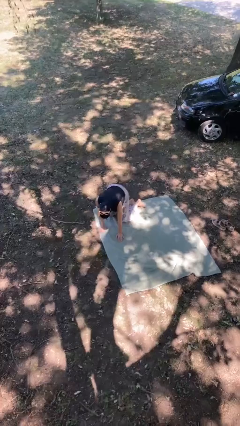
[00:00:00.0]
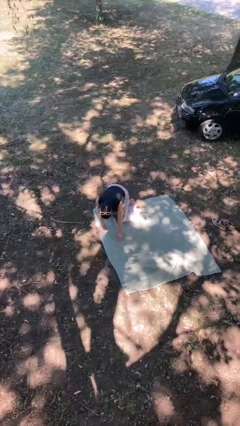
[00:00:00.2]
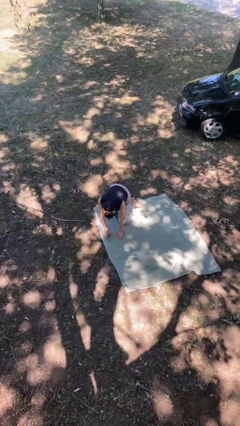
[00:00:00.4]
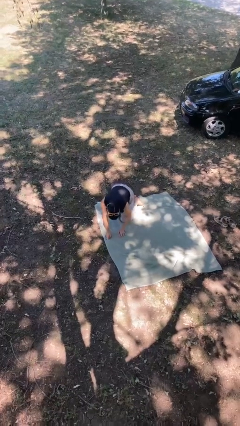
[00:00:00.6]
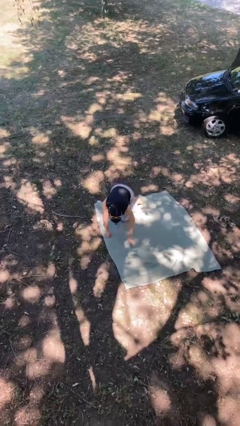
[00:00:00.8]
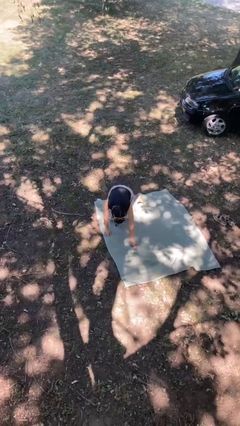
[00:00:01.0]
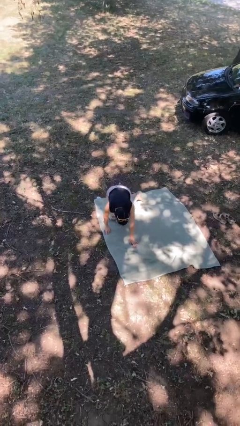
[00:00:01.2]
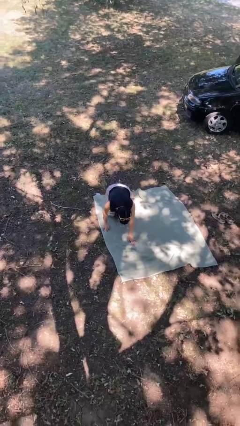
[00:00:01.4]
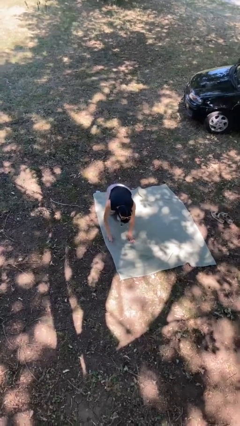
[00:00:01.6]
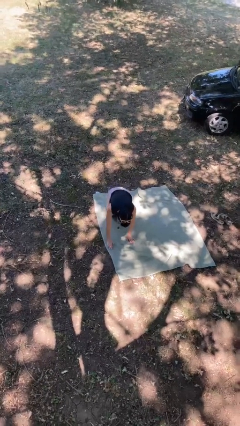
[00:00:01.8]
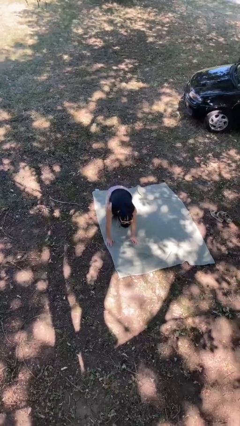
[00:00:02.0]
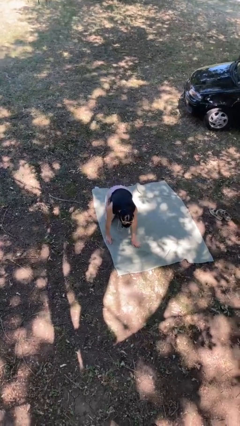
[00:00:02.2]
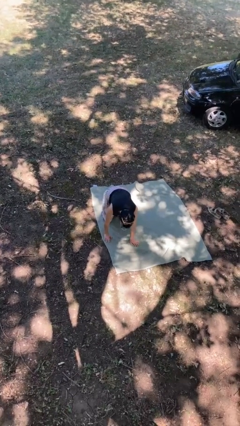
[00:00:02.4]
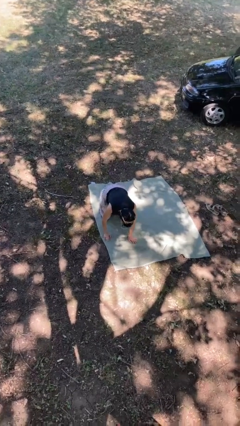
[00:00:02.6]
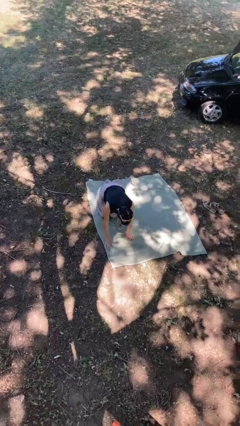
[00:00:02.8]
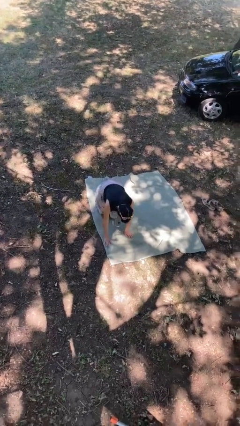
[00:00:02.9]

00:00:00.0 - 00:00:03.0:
person crawls

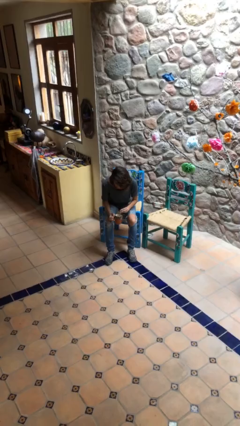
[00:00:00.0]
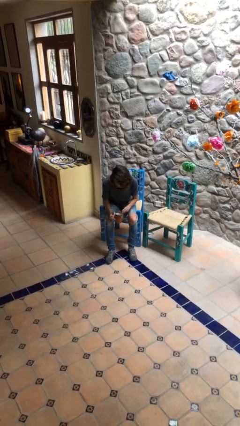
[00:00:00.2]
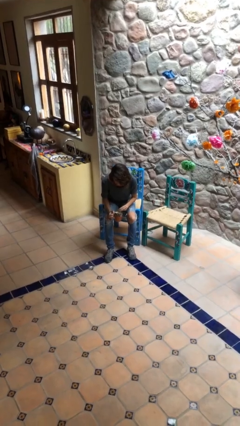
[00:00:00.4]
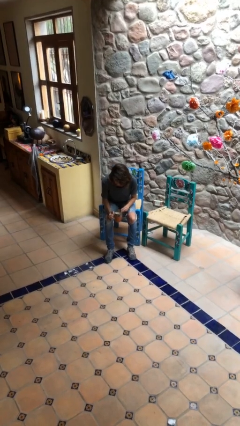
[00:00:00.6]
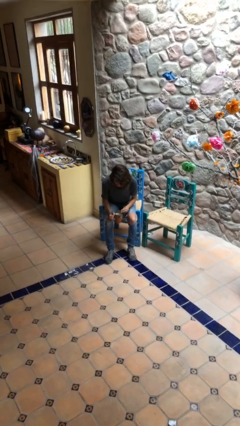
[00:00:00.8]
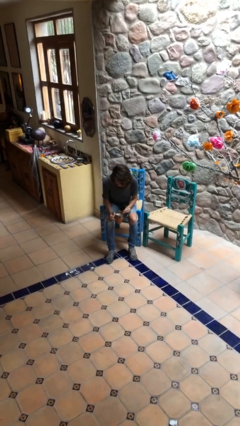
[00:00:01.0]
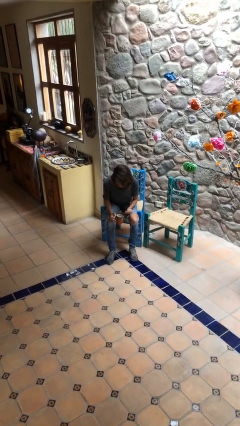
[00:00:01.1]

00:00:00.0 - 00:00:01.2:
person stirs mug

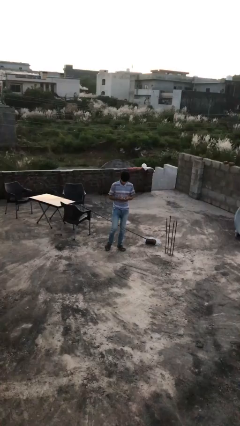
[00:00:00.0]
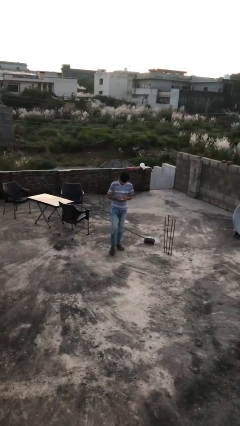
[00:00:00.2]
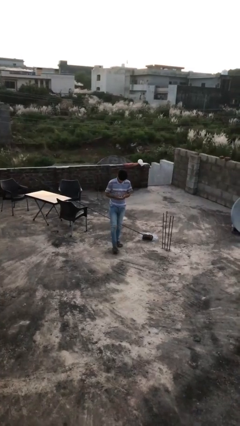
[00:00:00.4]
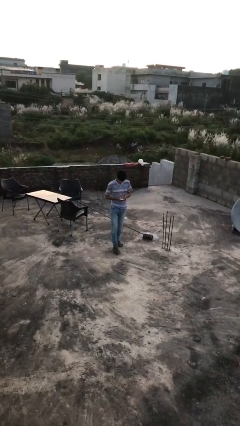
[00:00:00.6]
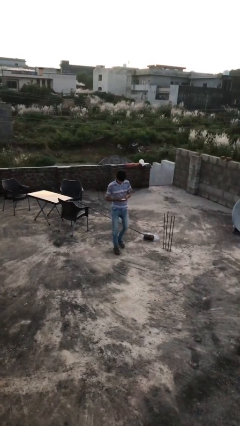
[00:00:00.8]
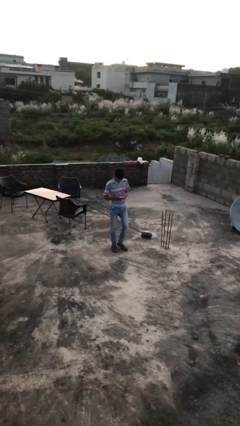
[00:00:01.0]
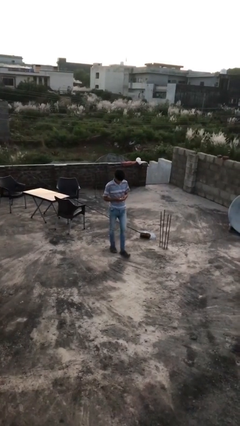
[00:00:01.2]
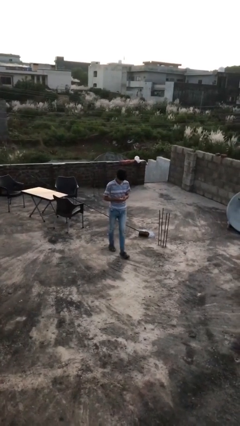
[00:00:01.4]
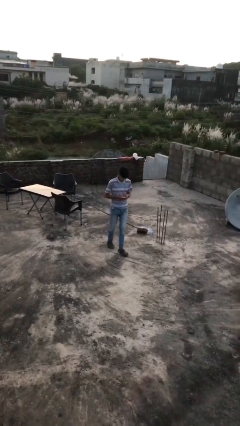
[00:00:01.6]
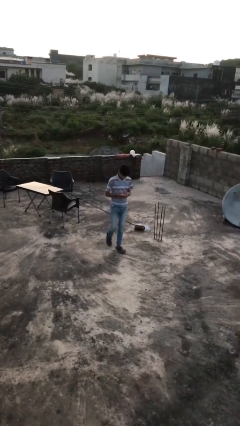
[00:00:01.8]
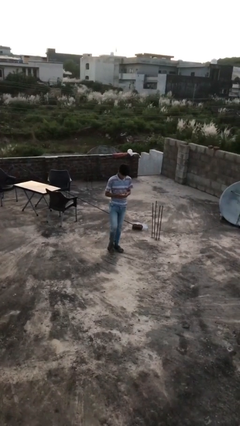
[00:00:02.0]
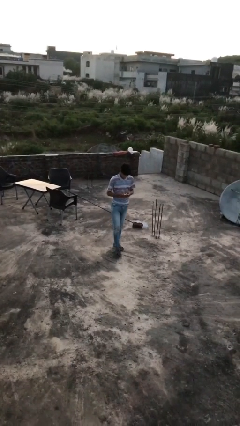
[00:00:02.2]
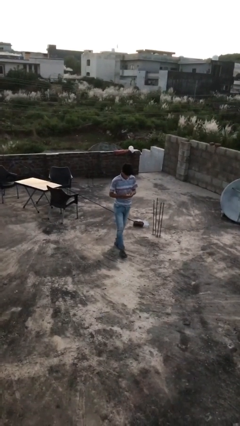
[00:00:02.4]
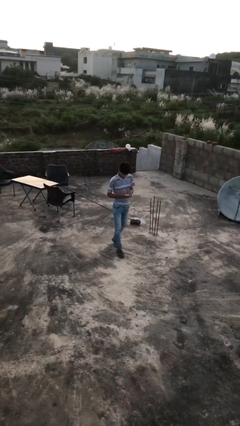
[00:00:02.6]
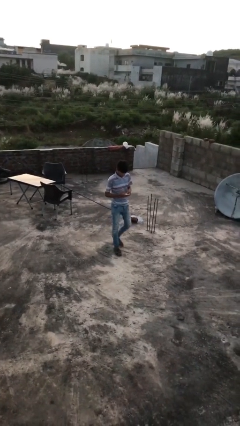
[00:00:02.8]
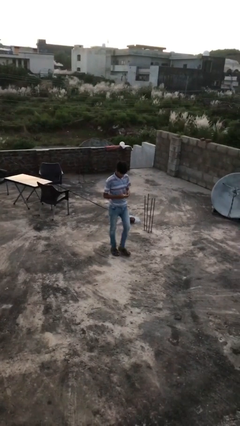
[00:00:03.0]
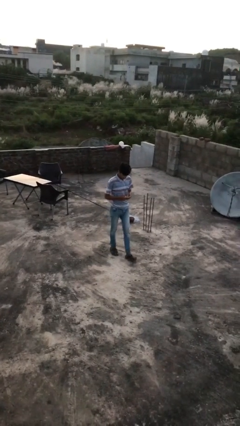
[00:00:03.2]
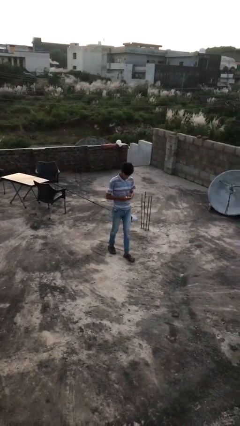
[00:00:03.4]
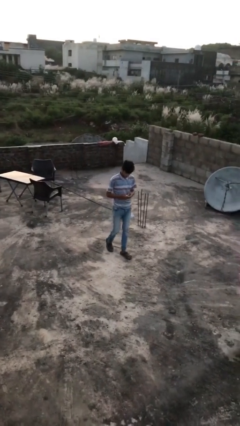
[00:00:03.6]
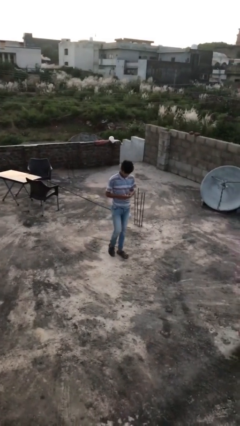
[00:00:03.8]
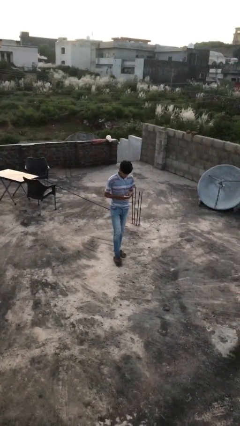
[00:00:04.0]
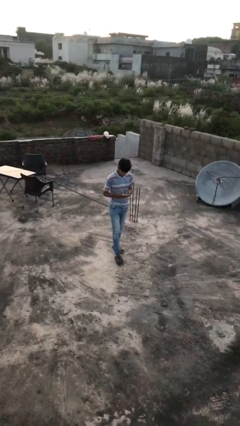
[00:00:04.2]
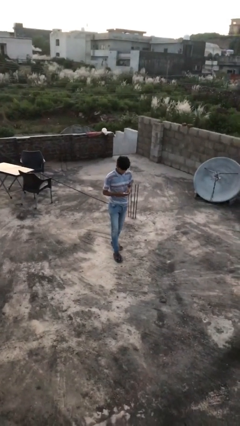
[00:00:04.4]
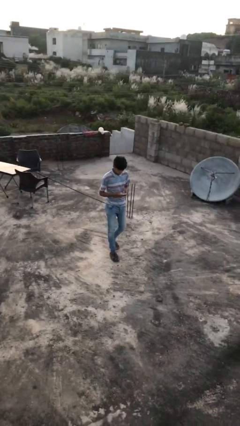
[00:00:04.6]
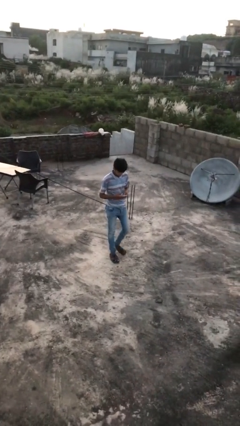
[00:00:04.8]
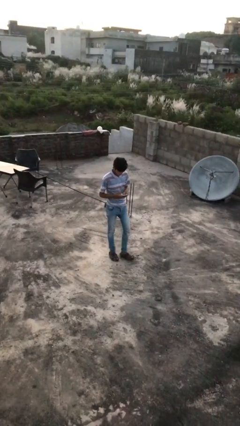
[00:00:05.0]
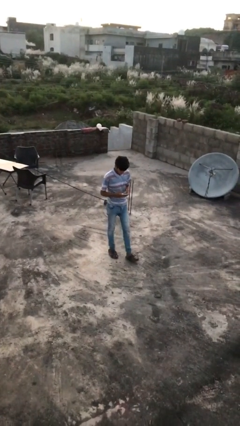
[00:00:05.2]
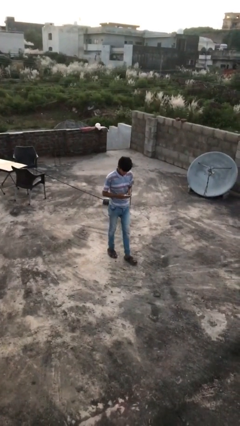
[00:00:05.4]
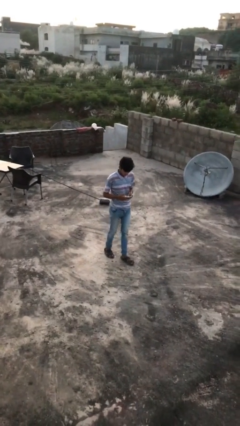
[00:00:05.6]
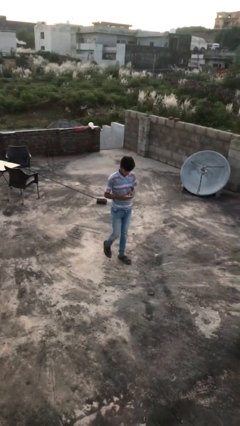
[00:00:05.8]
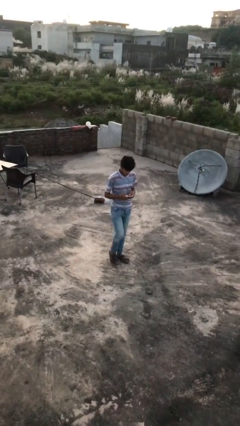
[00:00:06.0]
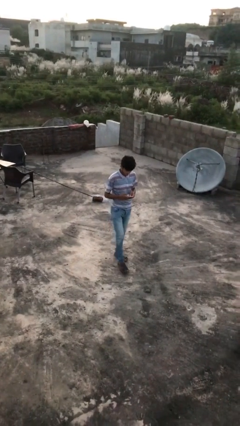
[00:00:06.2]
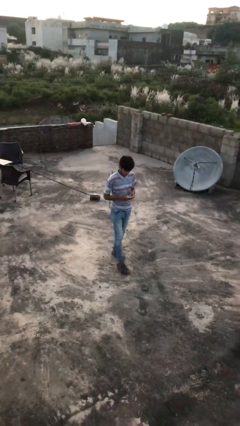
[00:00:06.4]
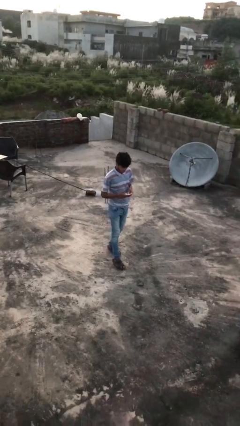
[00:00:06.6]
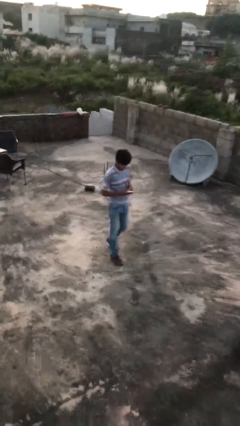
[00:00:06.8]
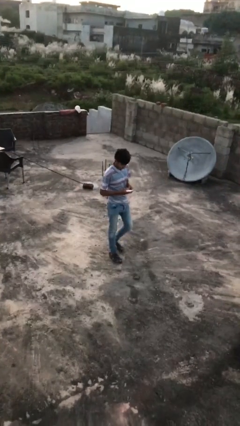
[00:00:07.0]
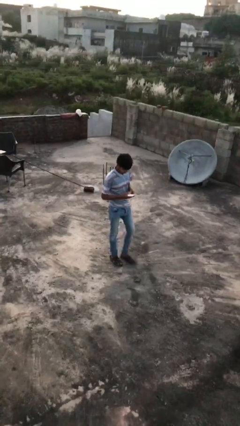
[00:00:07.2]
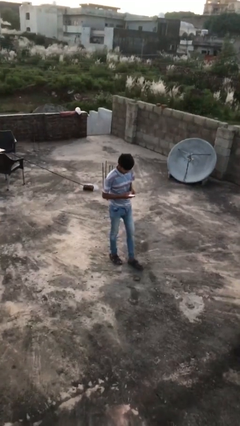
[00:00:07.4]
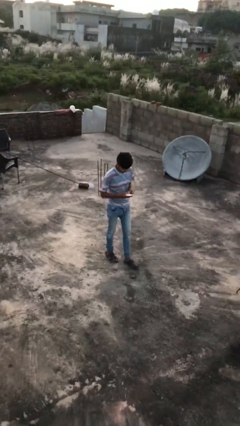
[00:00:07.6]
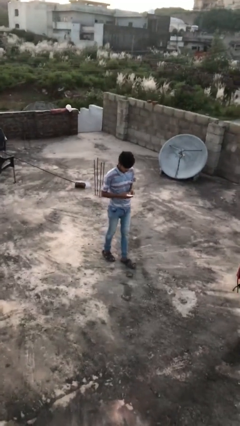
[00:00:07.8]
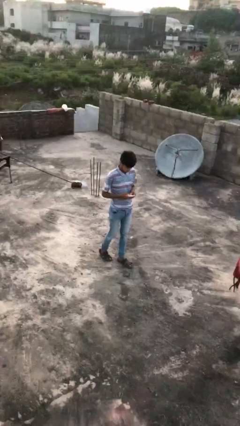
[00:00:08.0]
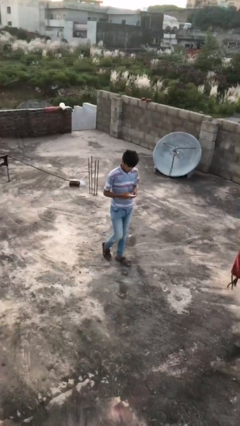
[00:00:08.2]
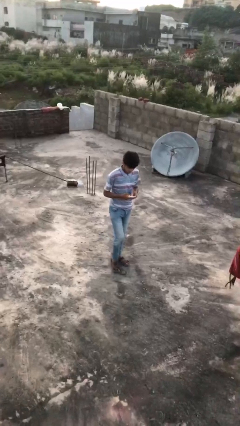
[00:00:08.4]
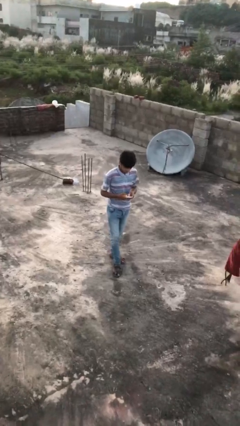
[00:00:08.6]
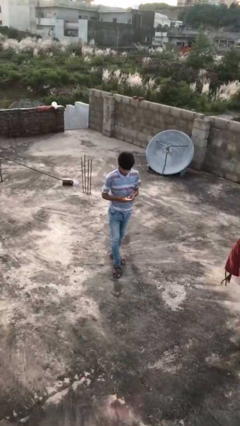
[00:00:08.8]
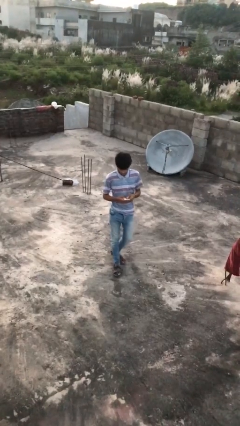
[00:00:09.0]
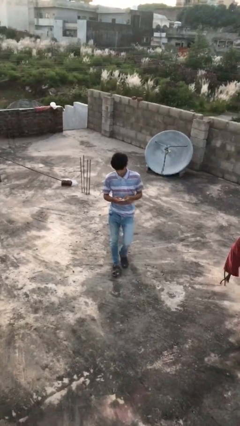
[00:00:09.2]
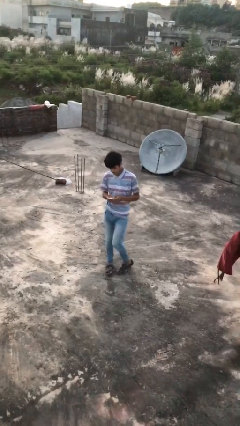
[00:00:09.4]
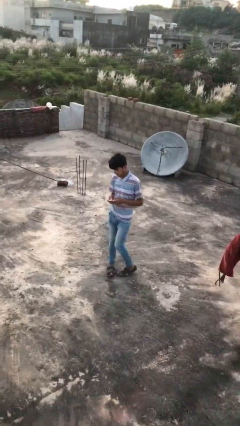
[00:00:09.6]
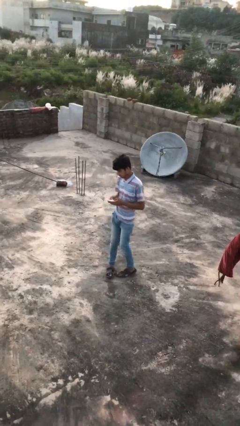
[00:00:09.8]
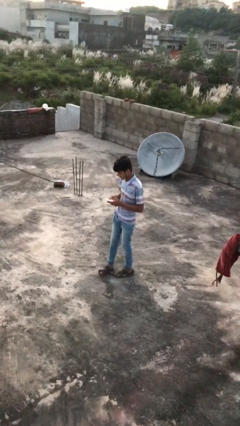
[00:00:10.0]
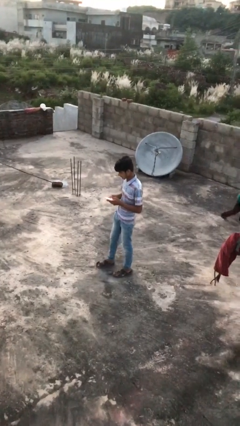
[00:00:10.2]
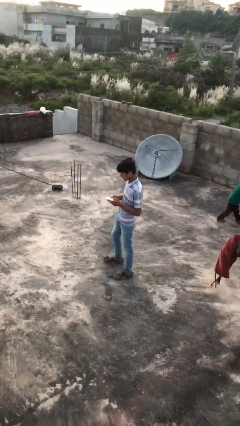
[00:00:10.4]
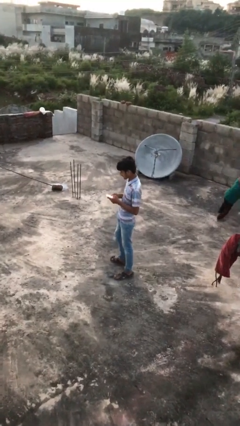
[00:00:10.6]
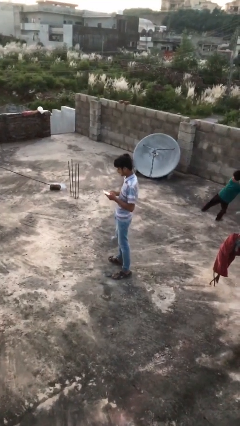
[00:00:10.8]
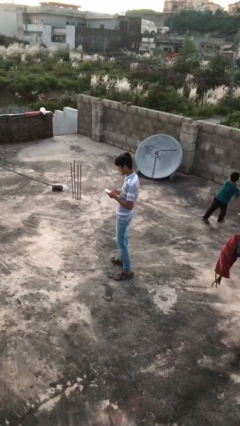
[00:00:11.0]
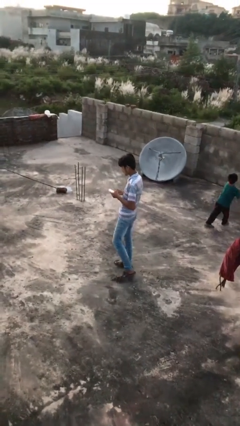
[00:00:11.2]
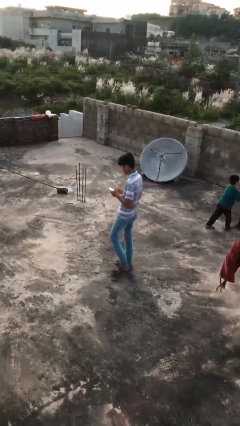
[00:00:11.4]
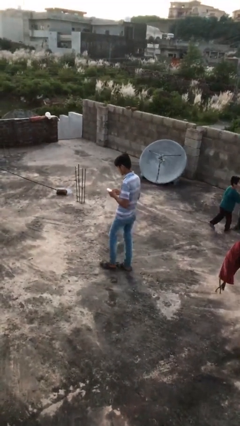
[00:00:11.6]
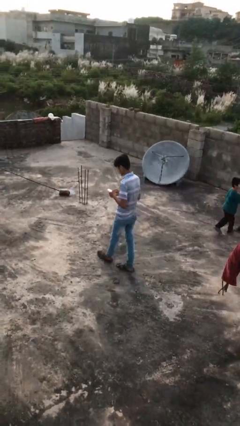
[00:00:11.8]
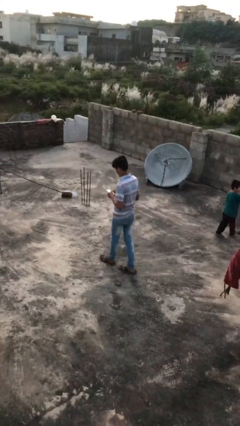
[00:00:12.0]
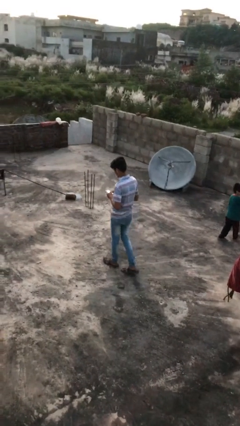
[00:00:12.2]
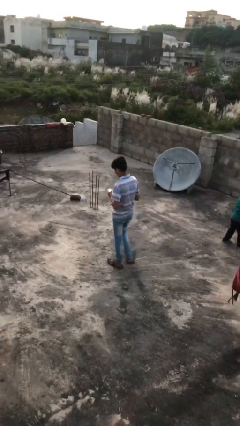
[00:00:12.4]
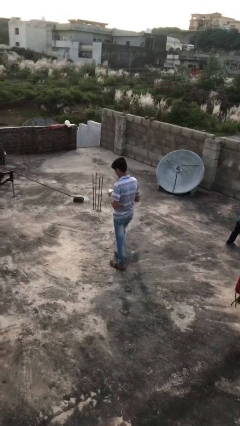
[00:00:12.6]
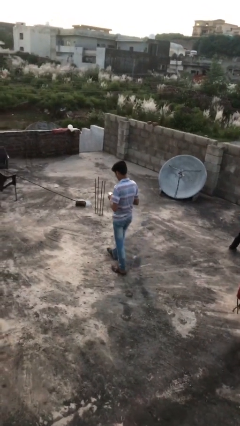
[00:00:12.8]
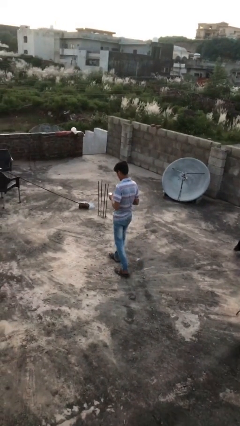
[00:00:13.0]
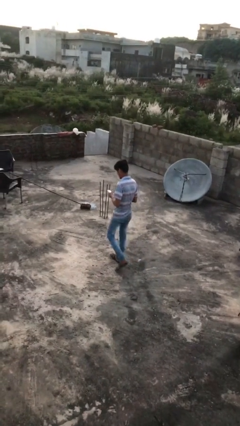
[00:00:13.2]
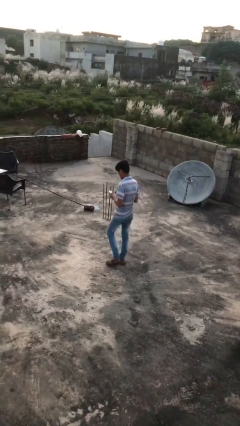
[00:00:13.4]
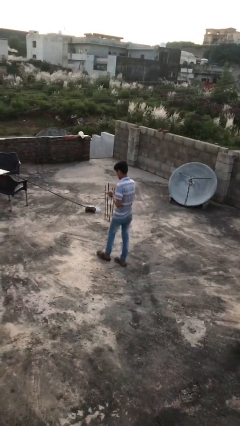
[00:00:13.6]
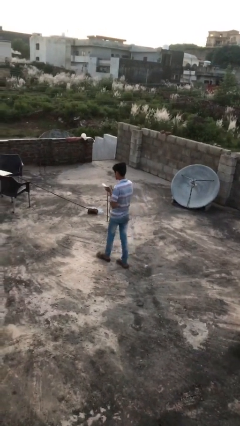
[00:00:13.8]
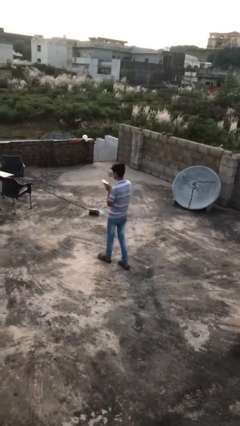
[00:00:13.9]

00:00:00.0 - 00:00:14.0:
person texts on phone
